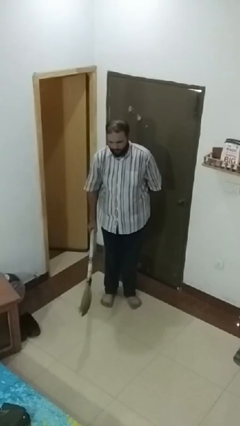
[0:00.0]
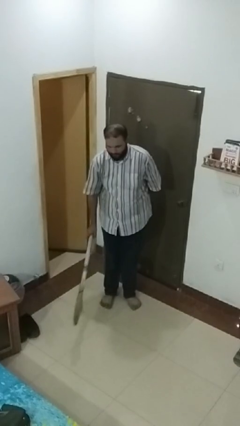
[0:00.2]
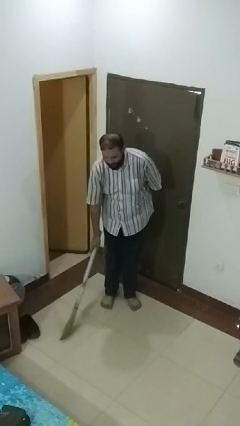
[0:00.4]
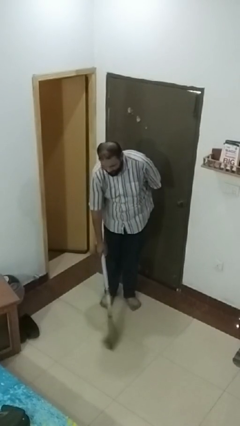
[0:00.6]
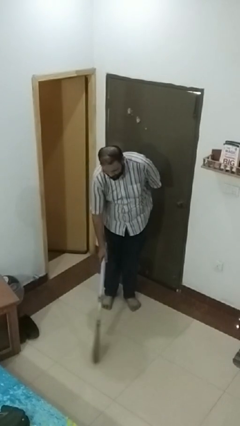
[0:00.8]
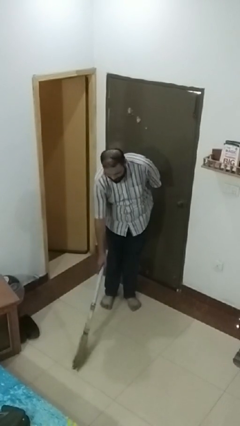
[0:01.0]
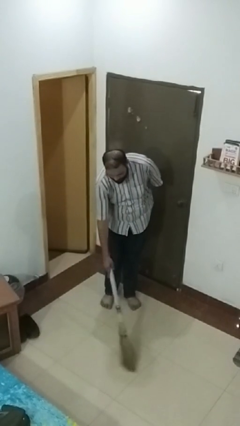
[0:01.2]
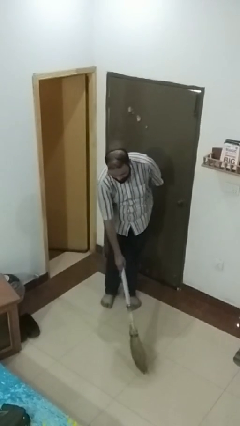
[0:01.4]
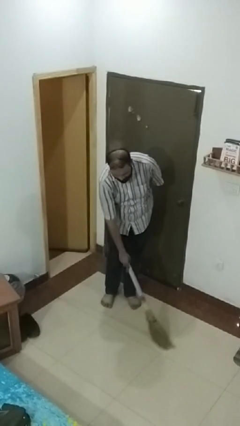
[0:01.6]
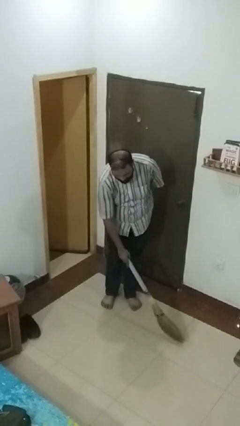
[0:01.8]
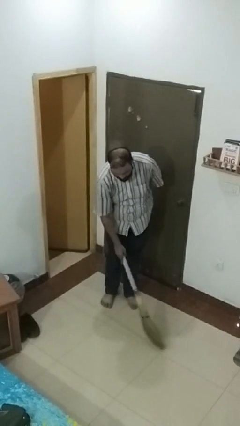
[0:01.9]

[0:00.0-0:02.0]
person sweeps floor

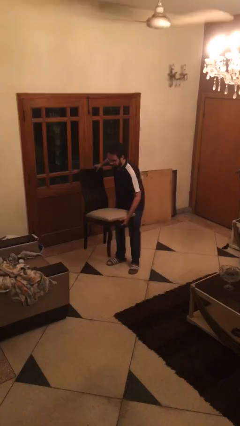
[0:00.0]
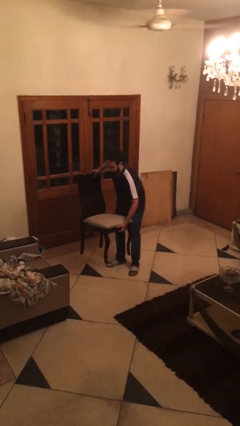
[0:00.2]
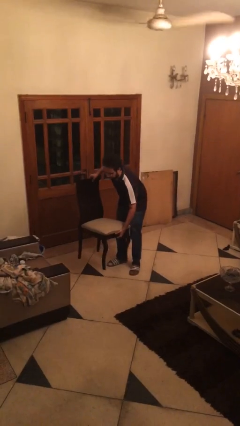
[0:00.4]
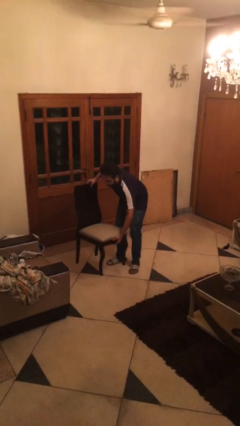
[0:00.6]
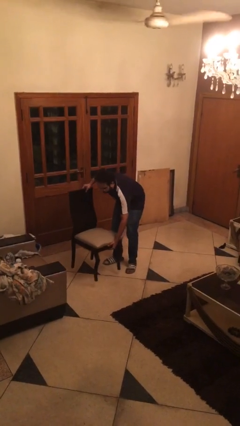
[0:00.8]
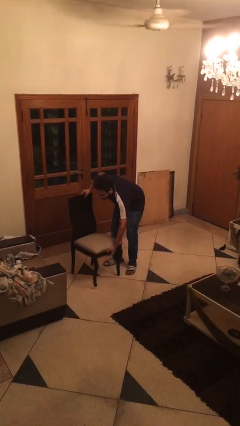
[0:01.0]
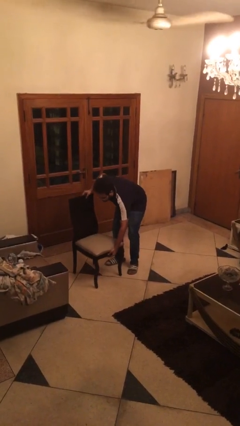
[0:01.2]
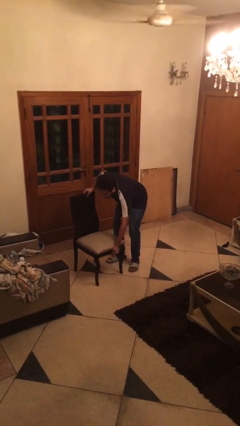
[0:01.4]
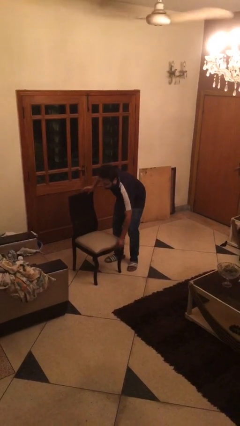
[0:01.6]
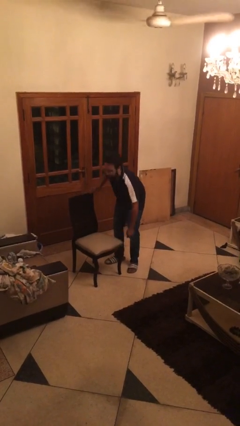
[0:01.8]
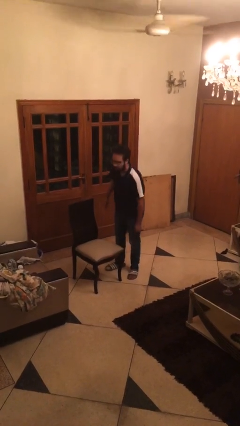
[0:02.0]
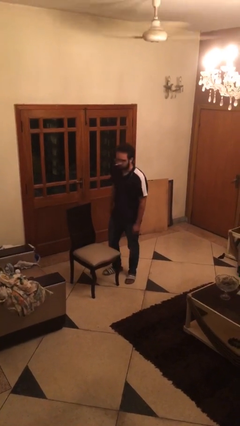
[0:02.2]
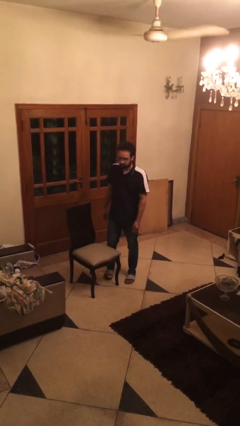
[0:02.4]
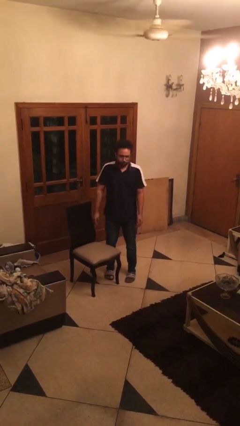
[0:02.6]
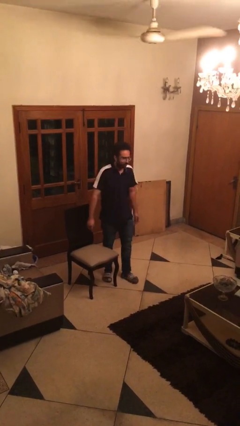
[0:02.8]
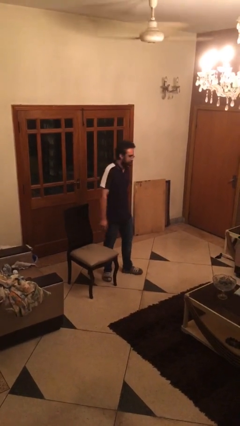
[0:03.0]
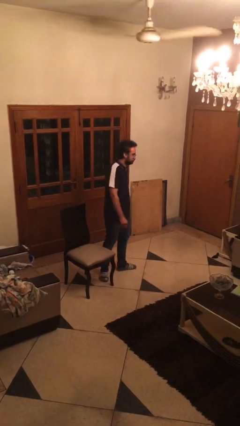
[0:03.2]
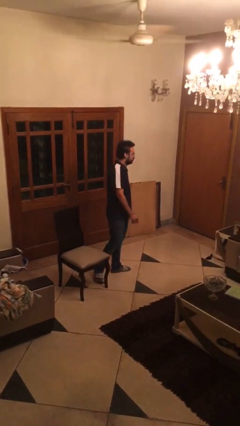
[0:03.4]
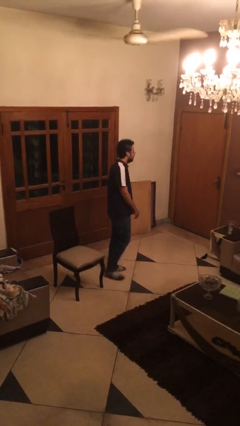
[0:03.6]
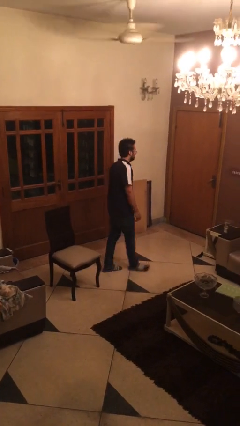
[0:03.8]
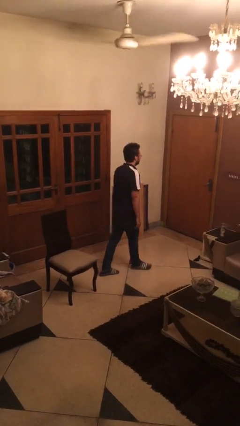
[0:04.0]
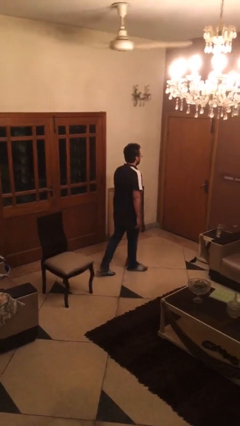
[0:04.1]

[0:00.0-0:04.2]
person puts down object on floor

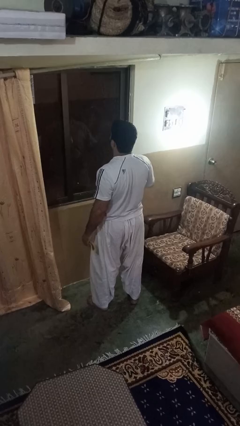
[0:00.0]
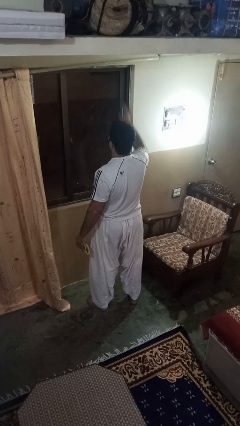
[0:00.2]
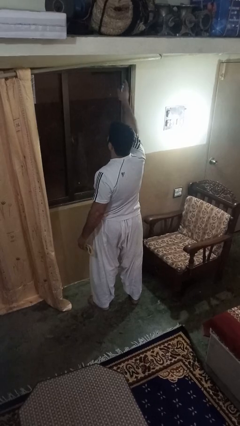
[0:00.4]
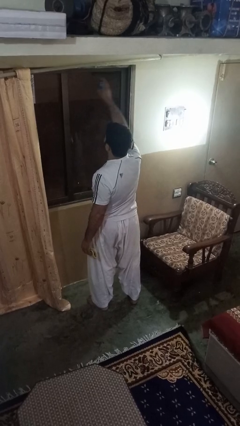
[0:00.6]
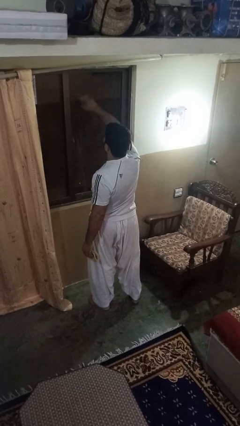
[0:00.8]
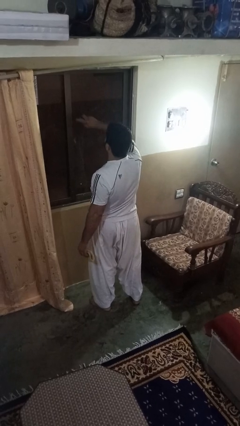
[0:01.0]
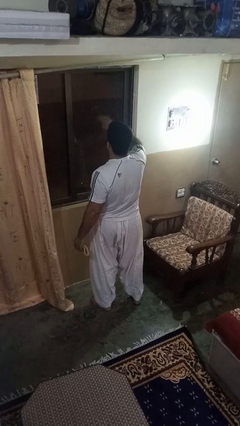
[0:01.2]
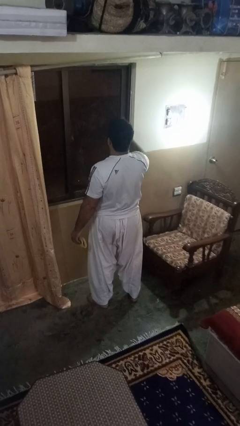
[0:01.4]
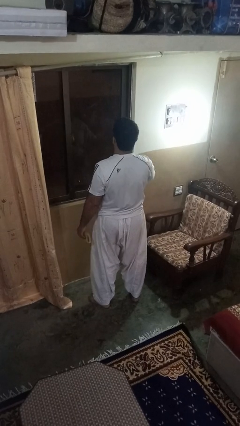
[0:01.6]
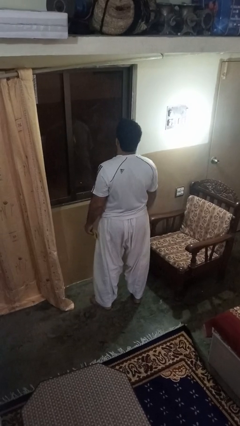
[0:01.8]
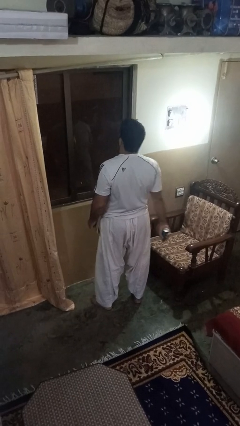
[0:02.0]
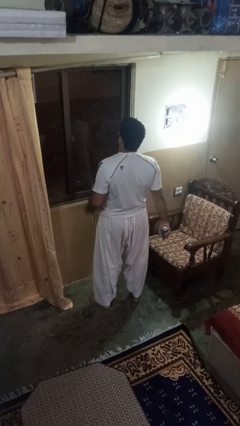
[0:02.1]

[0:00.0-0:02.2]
person sprays from bottle

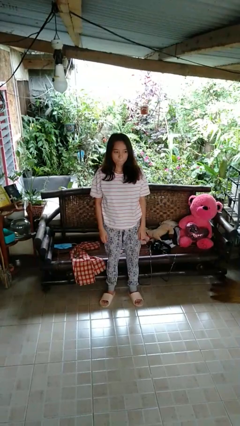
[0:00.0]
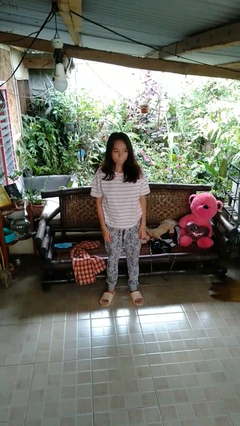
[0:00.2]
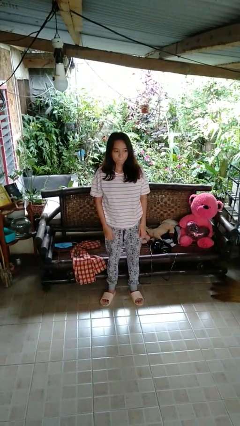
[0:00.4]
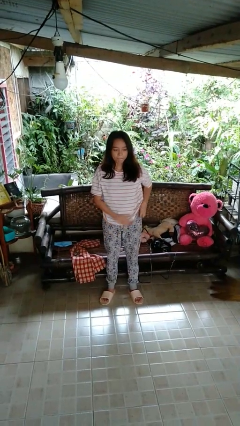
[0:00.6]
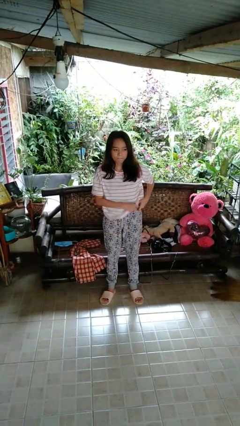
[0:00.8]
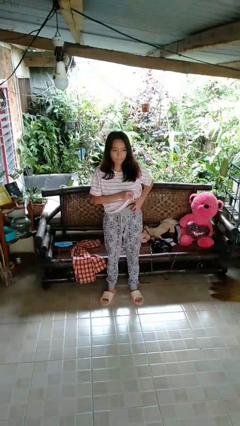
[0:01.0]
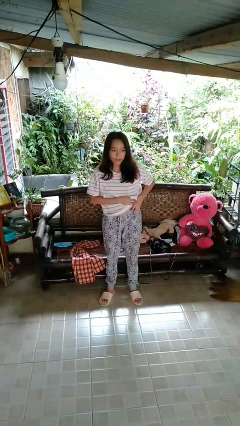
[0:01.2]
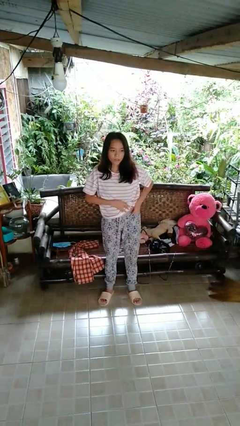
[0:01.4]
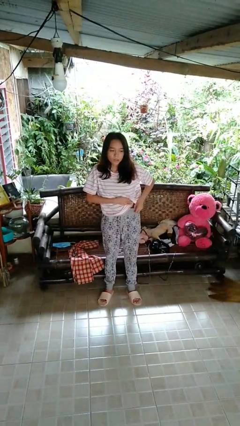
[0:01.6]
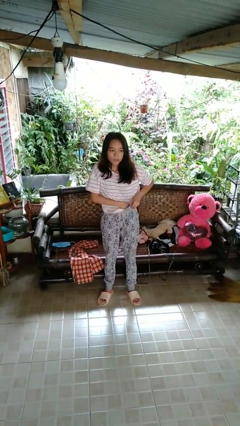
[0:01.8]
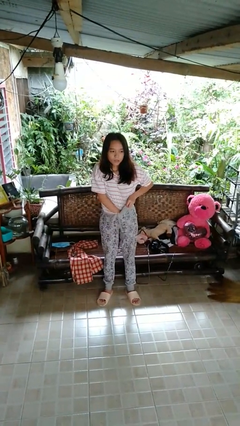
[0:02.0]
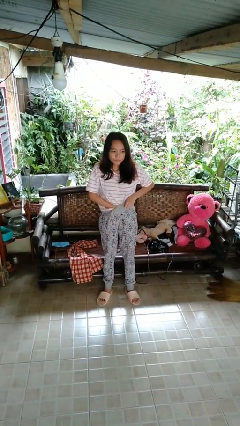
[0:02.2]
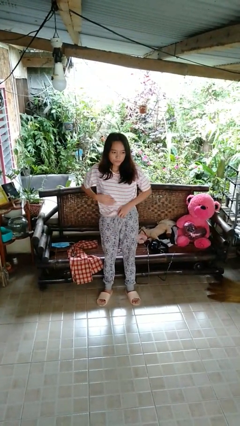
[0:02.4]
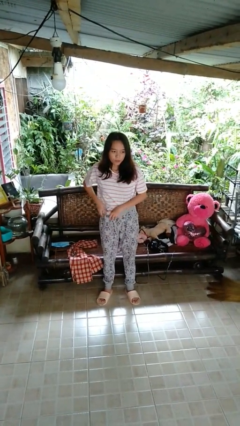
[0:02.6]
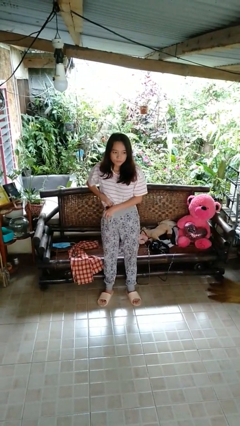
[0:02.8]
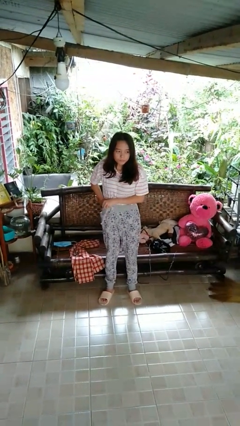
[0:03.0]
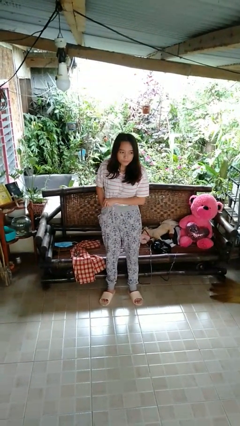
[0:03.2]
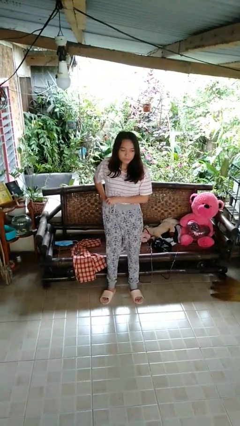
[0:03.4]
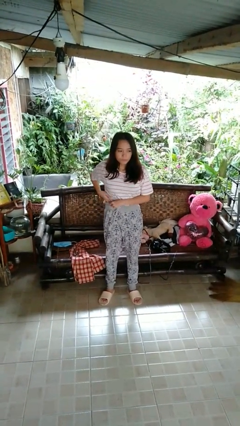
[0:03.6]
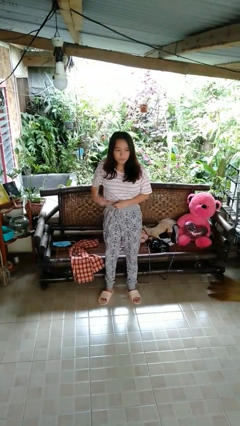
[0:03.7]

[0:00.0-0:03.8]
person tucks in shirt

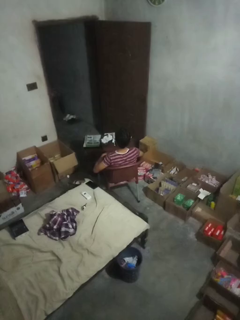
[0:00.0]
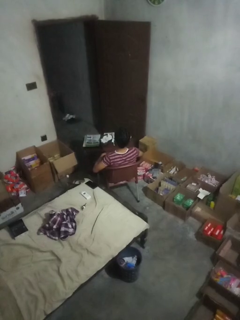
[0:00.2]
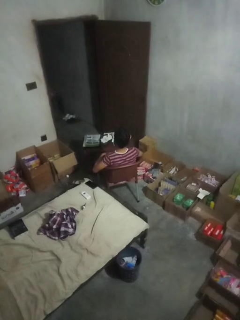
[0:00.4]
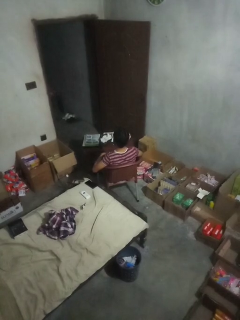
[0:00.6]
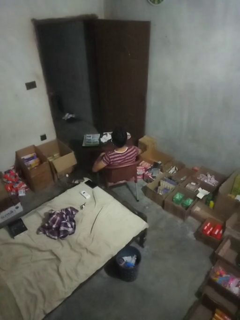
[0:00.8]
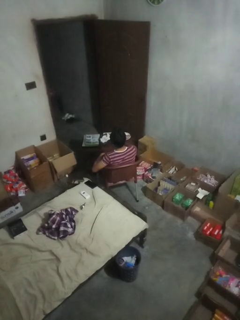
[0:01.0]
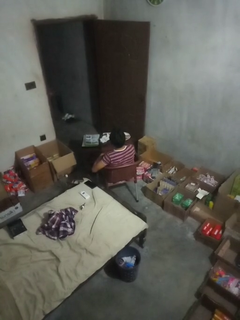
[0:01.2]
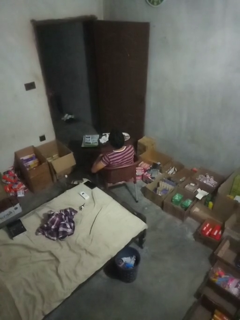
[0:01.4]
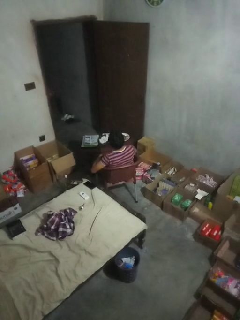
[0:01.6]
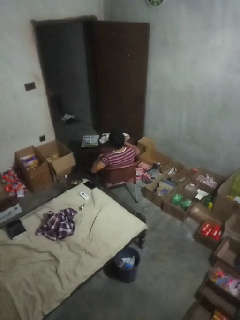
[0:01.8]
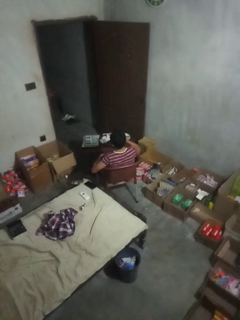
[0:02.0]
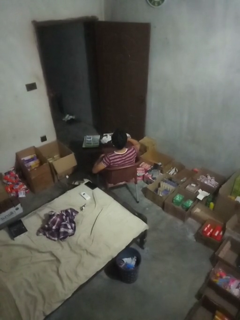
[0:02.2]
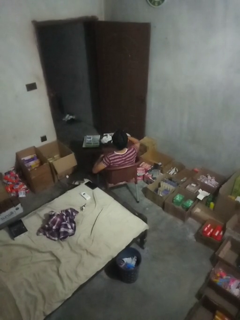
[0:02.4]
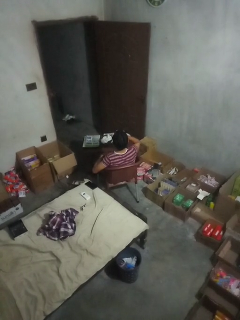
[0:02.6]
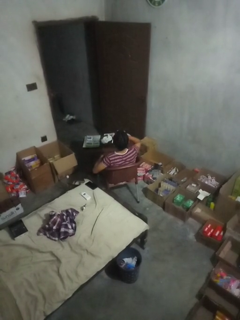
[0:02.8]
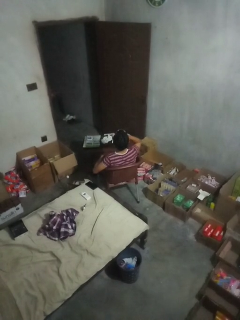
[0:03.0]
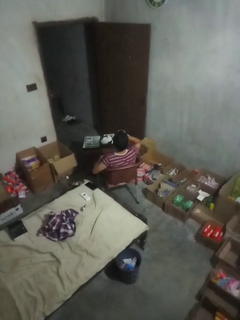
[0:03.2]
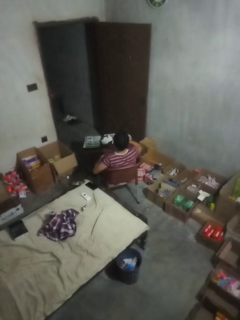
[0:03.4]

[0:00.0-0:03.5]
person drinks from cup

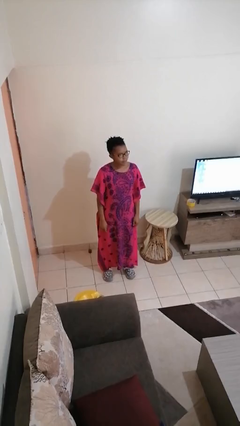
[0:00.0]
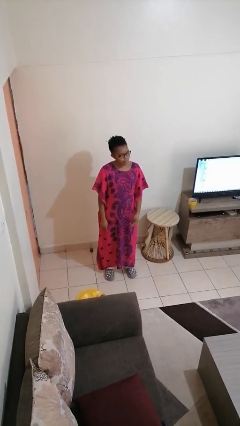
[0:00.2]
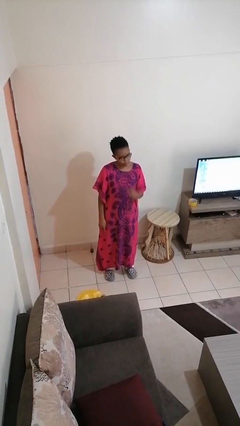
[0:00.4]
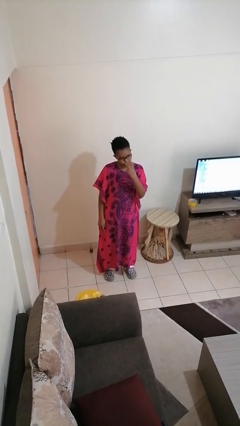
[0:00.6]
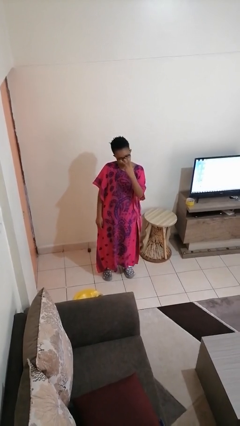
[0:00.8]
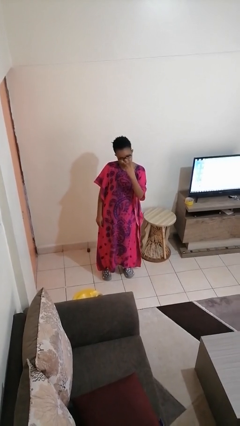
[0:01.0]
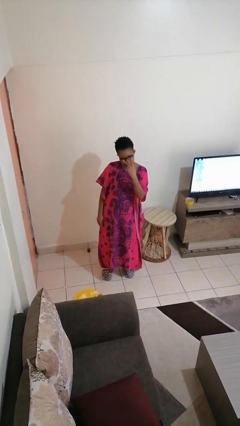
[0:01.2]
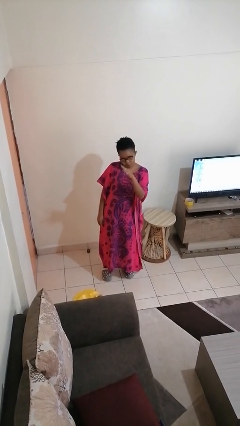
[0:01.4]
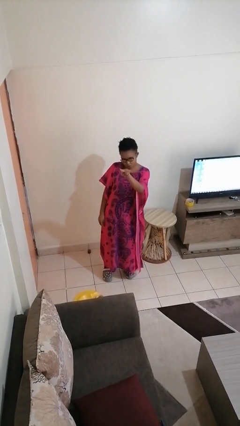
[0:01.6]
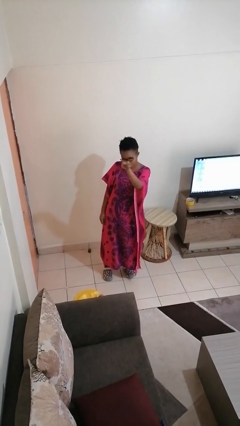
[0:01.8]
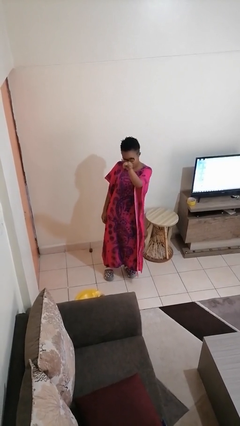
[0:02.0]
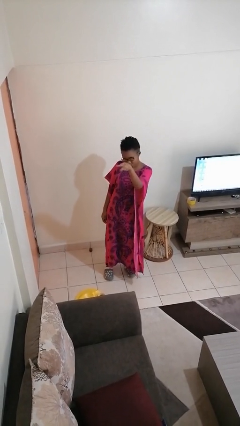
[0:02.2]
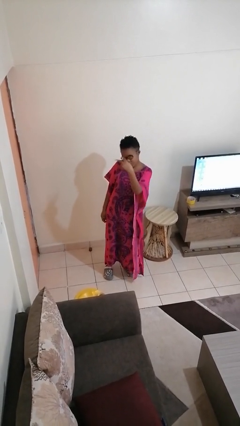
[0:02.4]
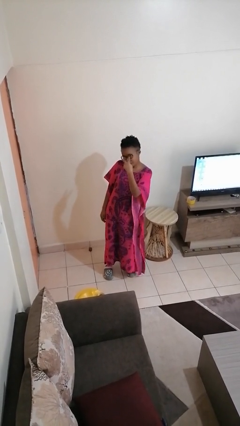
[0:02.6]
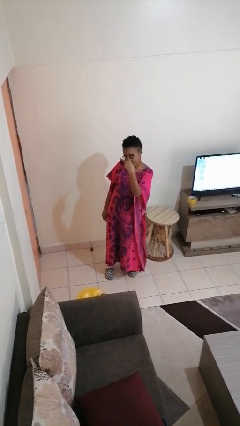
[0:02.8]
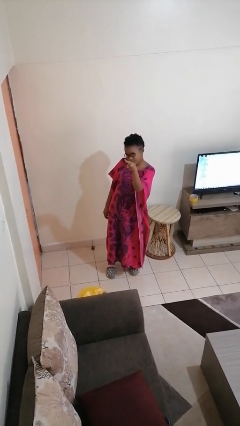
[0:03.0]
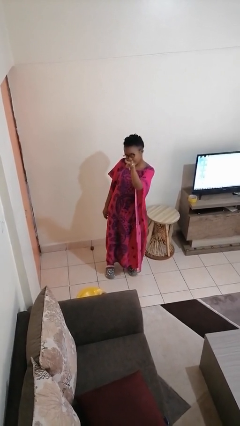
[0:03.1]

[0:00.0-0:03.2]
person gestures watch closely
